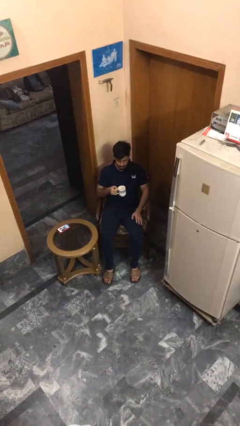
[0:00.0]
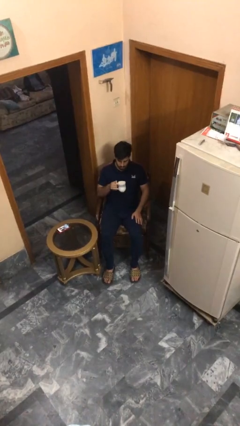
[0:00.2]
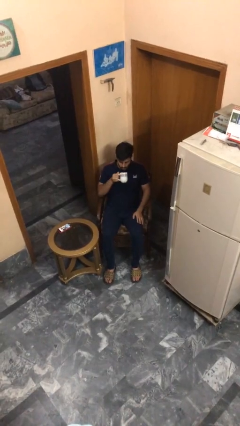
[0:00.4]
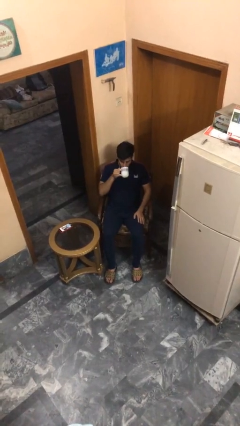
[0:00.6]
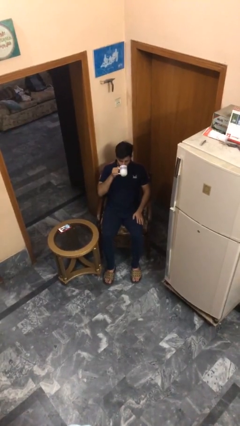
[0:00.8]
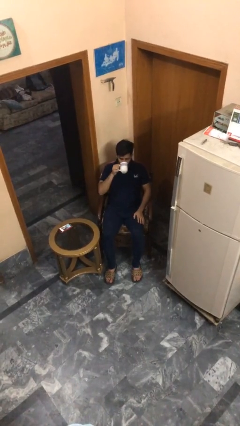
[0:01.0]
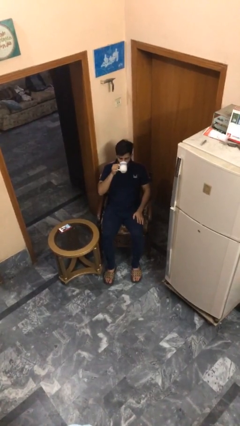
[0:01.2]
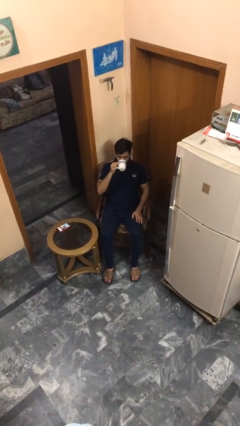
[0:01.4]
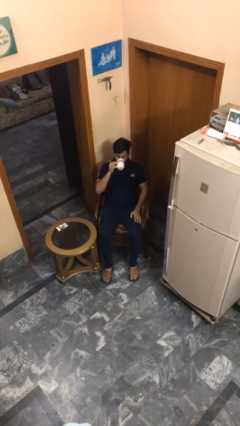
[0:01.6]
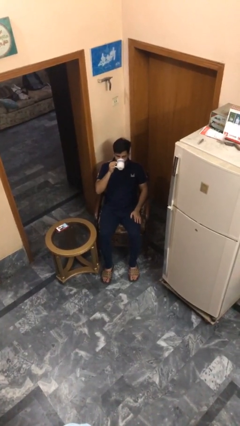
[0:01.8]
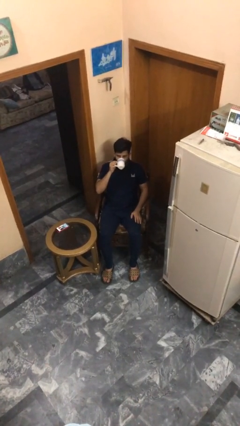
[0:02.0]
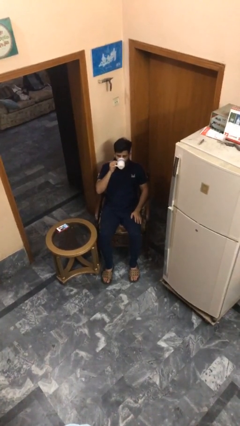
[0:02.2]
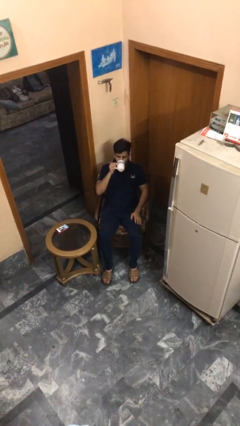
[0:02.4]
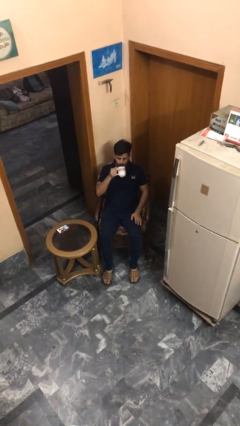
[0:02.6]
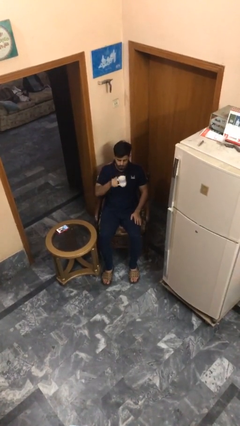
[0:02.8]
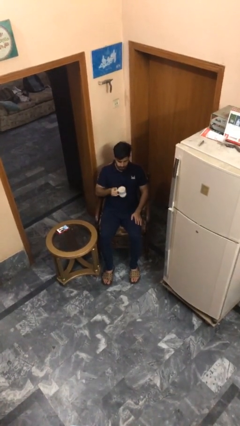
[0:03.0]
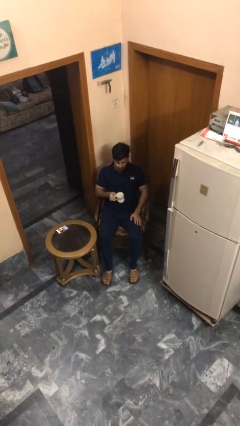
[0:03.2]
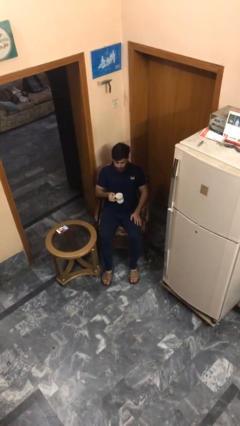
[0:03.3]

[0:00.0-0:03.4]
person drinks from mug

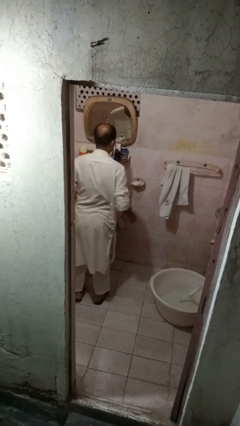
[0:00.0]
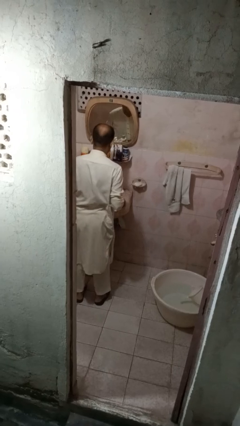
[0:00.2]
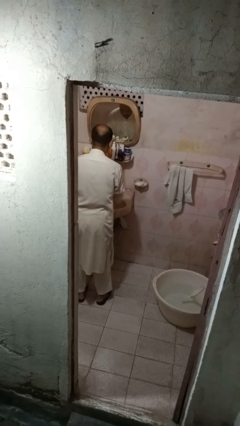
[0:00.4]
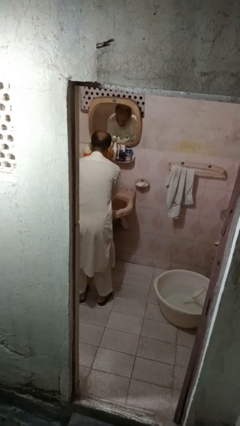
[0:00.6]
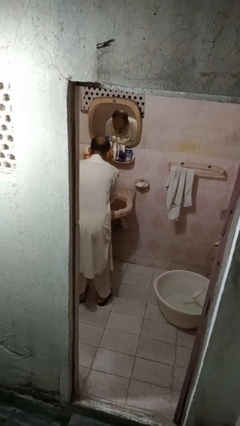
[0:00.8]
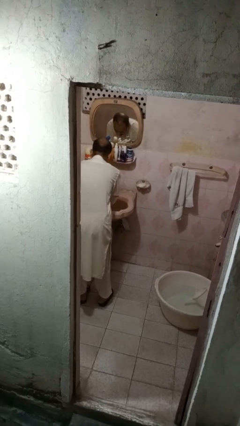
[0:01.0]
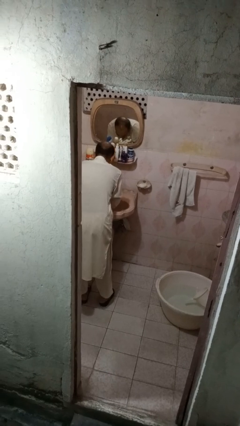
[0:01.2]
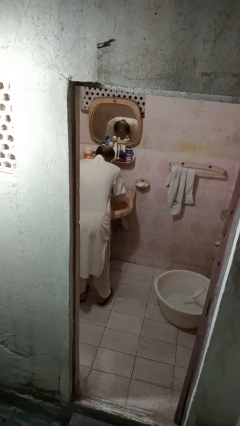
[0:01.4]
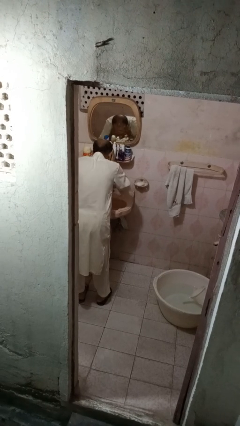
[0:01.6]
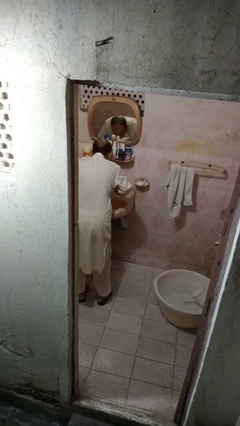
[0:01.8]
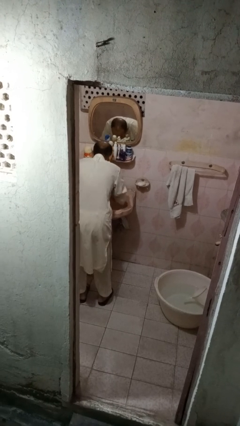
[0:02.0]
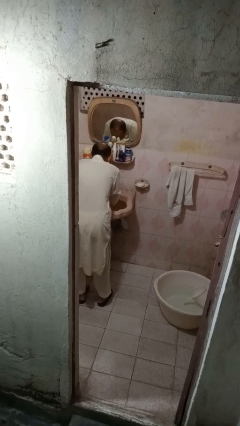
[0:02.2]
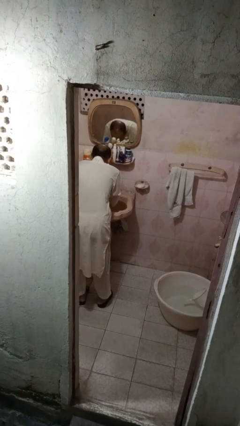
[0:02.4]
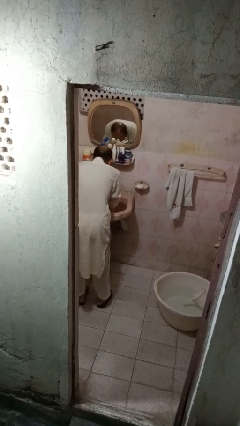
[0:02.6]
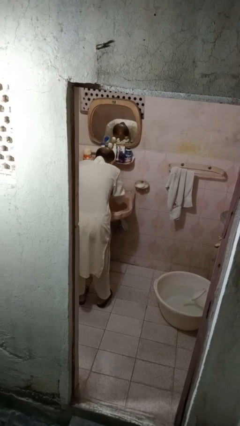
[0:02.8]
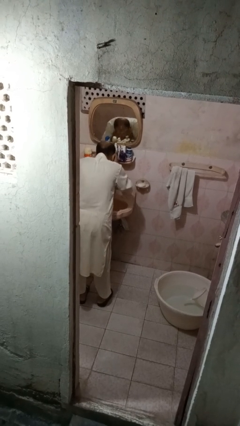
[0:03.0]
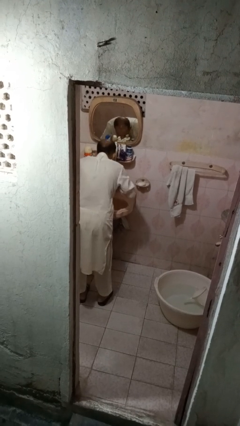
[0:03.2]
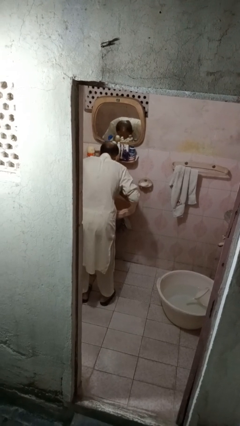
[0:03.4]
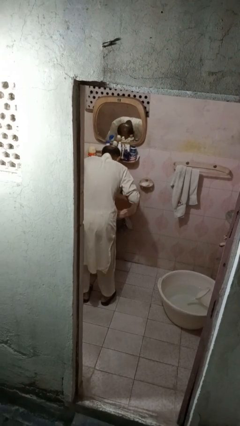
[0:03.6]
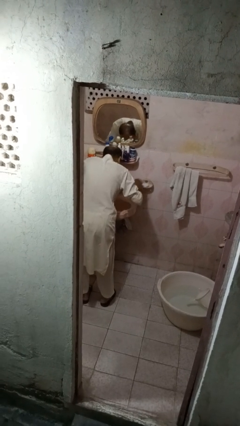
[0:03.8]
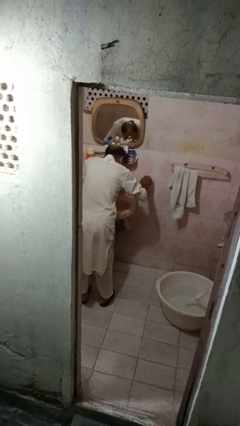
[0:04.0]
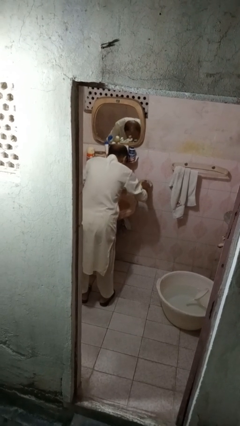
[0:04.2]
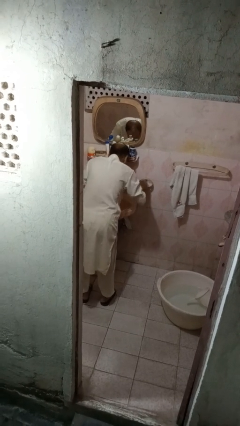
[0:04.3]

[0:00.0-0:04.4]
person washes face

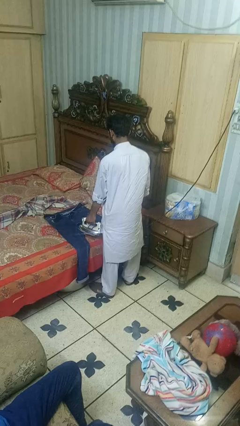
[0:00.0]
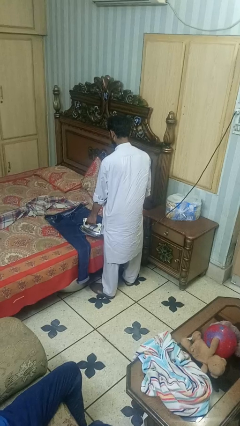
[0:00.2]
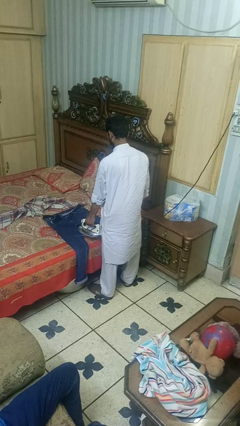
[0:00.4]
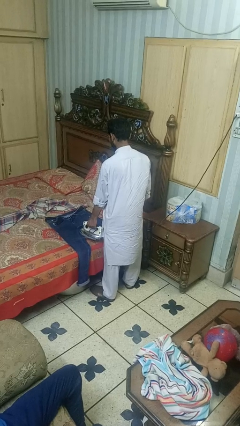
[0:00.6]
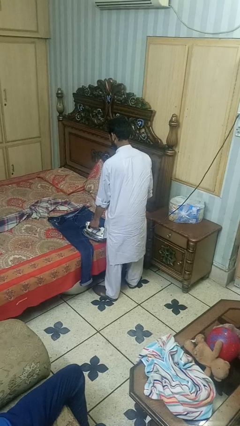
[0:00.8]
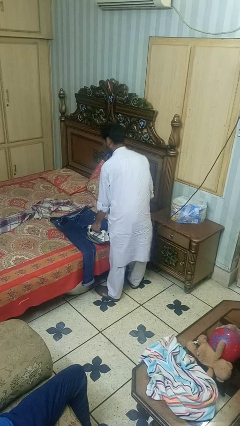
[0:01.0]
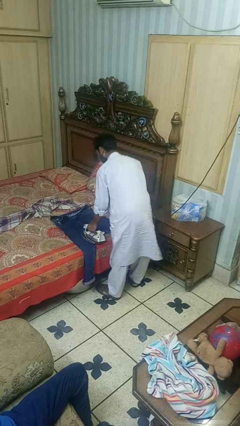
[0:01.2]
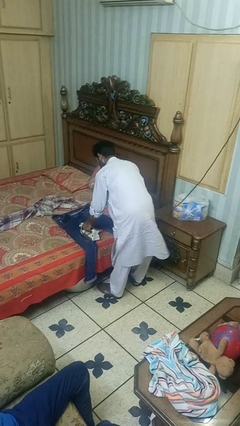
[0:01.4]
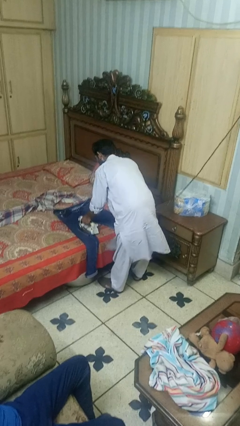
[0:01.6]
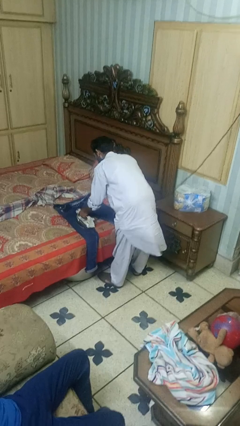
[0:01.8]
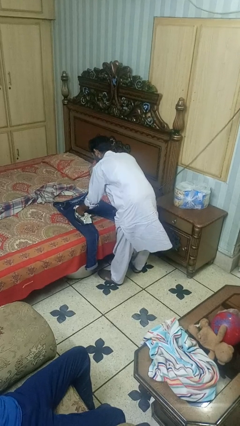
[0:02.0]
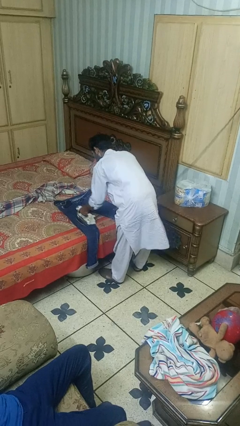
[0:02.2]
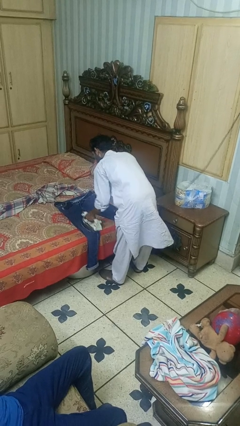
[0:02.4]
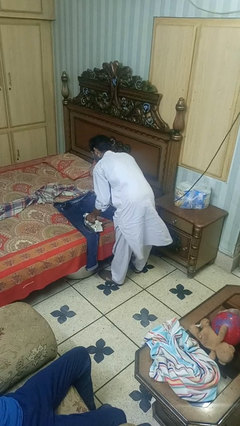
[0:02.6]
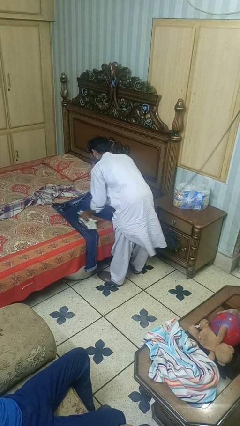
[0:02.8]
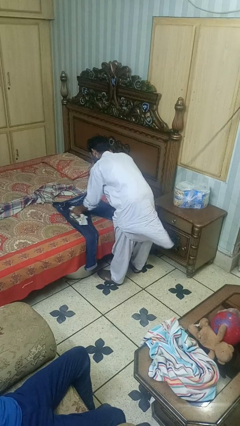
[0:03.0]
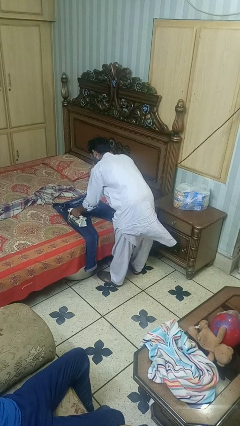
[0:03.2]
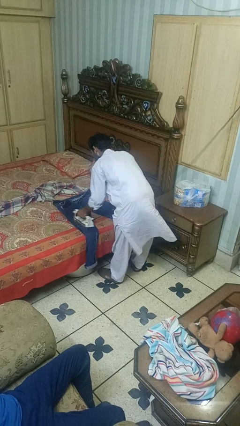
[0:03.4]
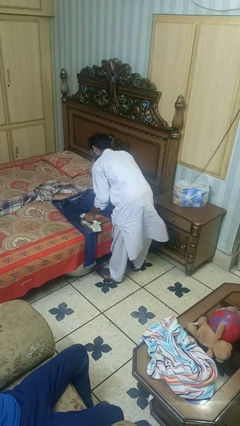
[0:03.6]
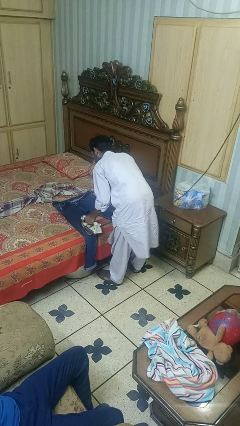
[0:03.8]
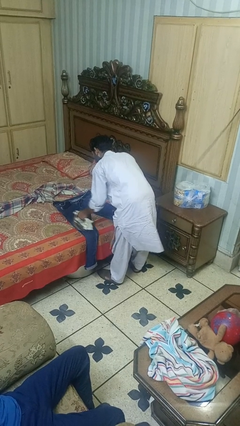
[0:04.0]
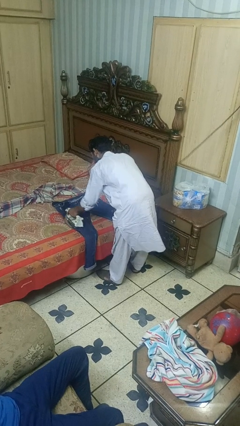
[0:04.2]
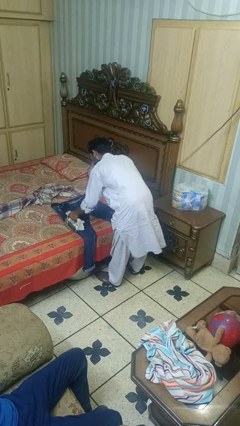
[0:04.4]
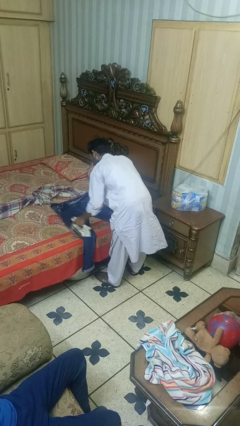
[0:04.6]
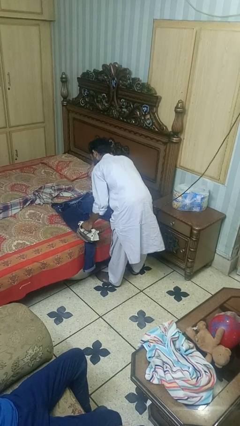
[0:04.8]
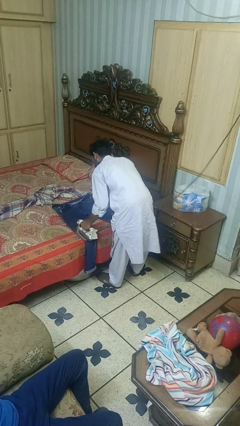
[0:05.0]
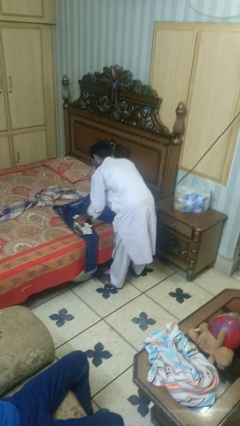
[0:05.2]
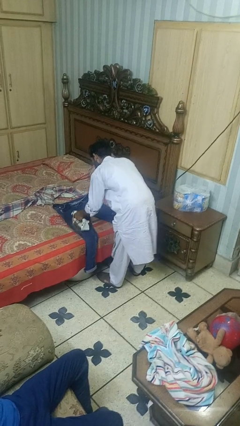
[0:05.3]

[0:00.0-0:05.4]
person irons clothes

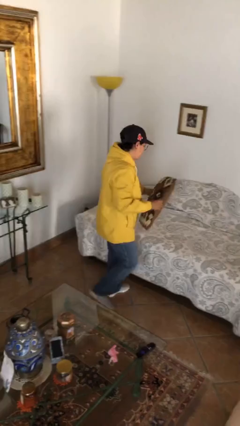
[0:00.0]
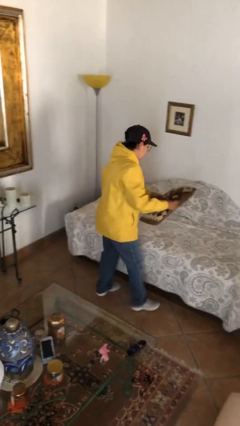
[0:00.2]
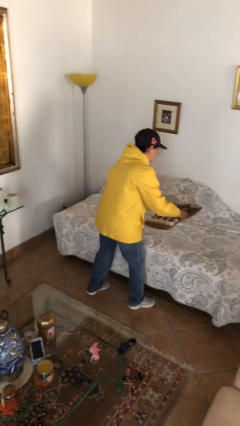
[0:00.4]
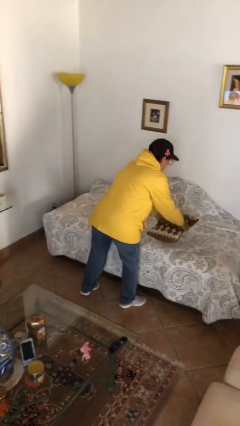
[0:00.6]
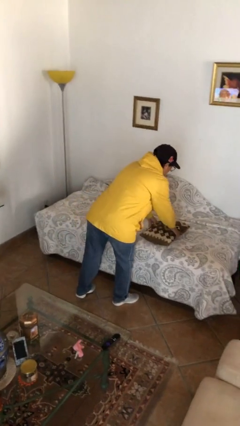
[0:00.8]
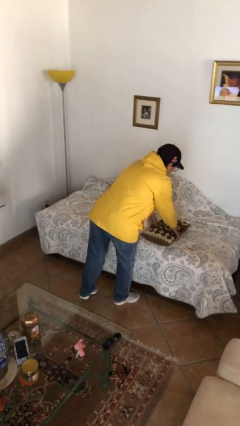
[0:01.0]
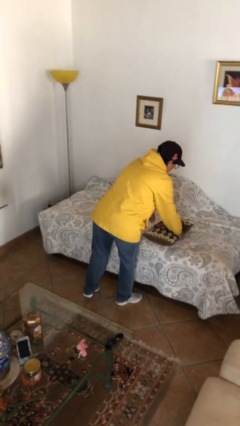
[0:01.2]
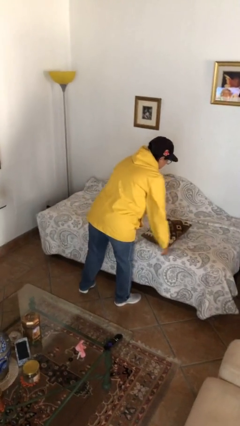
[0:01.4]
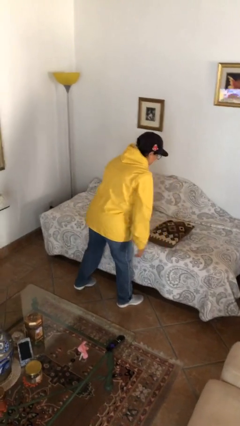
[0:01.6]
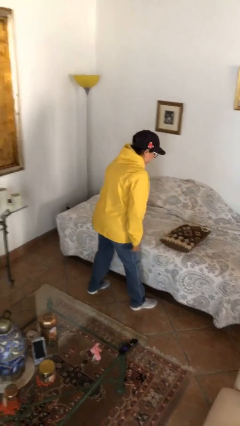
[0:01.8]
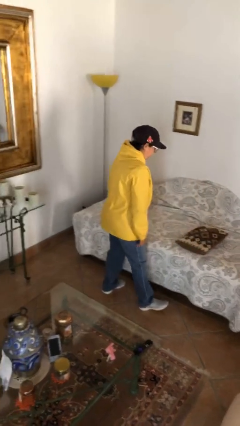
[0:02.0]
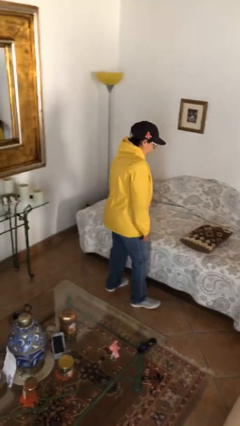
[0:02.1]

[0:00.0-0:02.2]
person puts down object on bed

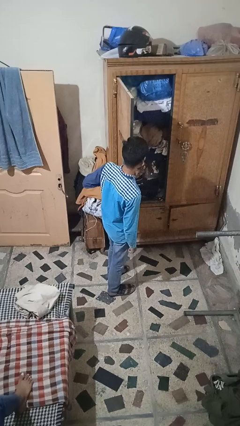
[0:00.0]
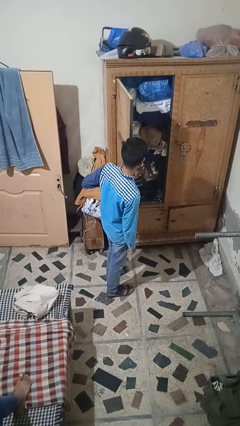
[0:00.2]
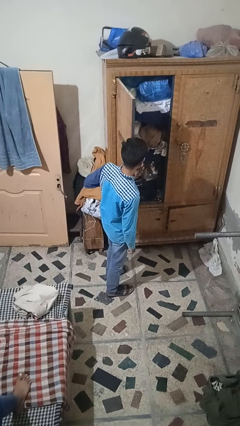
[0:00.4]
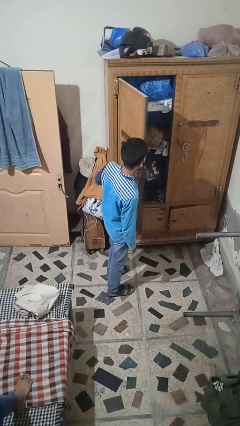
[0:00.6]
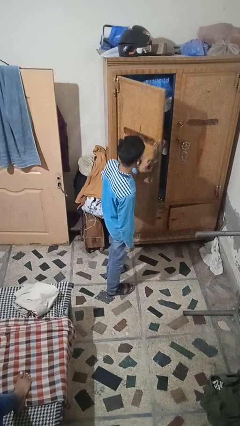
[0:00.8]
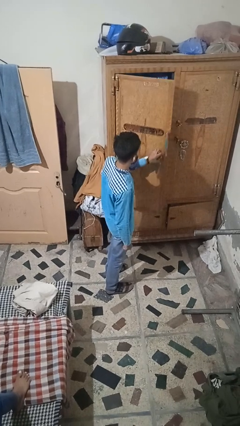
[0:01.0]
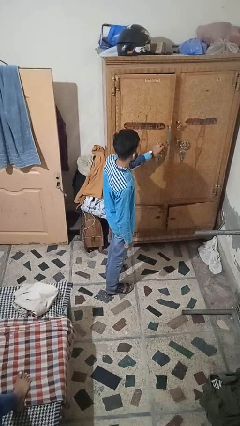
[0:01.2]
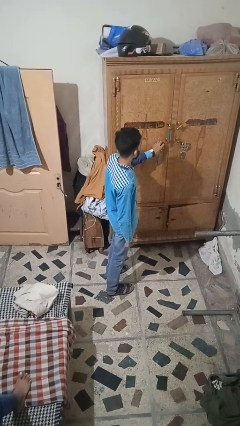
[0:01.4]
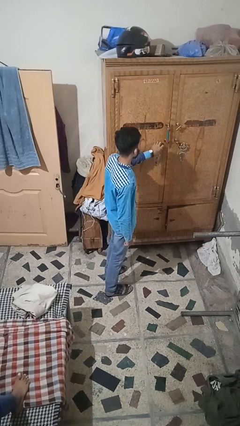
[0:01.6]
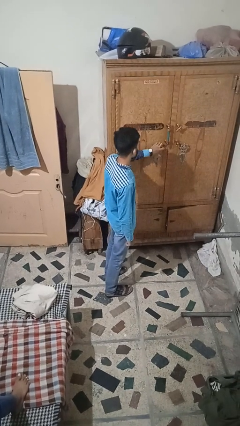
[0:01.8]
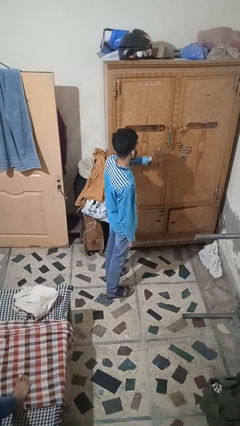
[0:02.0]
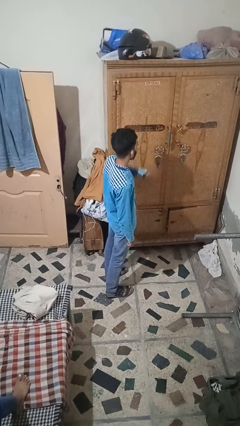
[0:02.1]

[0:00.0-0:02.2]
person closes closet door
